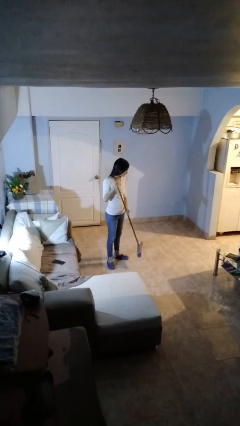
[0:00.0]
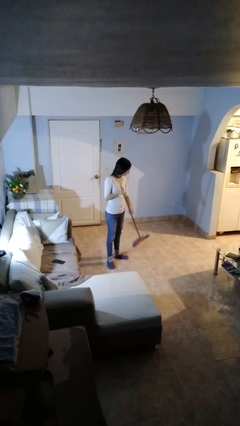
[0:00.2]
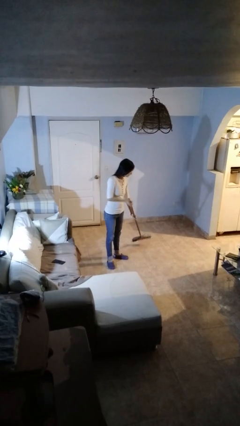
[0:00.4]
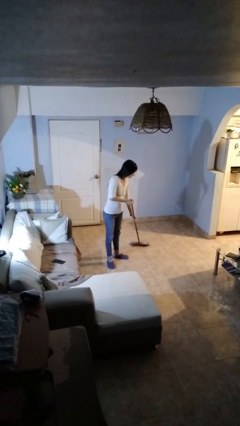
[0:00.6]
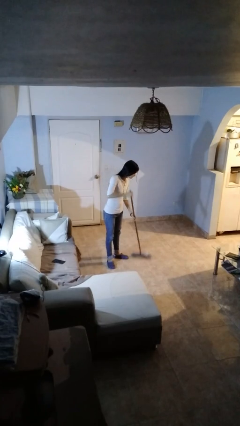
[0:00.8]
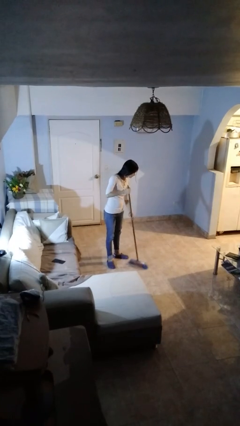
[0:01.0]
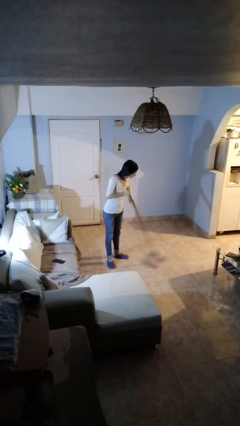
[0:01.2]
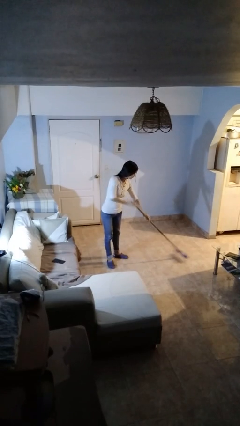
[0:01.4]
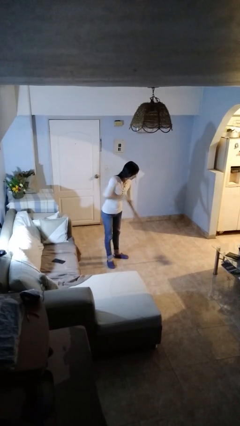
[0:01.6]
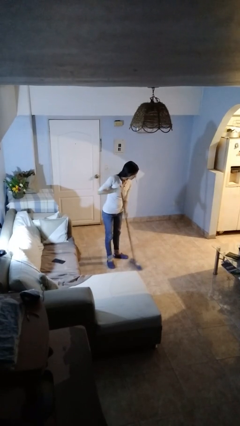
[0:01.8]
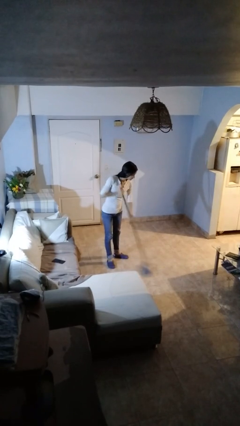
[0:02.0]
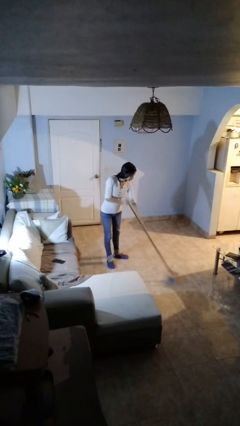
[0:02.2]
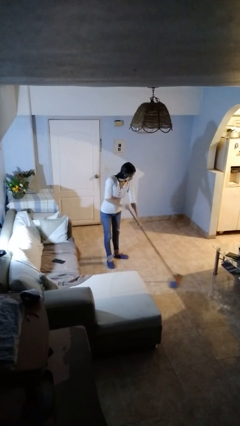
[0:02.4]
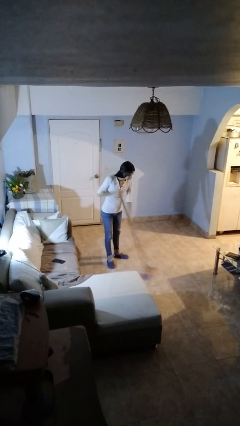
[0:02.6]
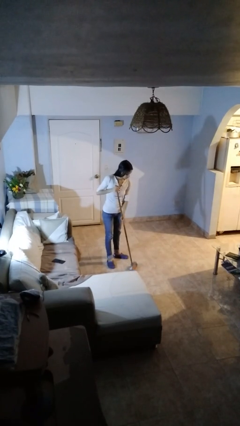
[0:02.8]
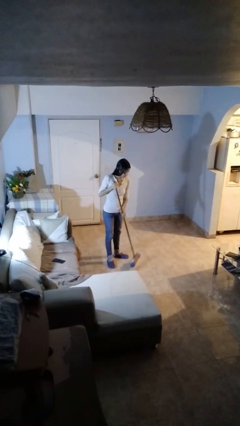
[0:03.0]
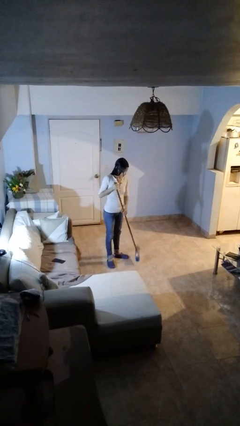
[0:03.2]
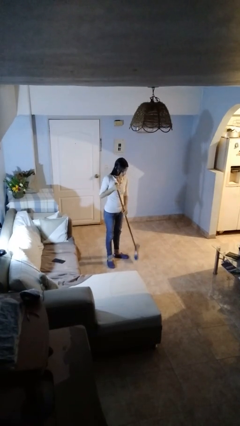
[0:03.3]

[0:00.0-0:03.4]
person sweeps floor

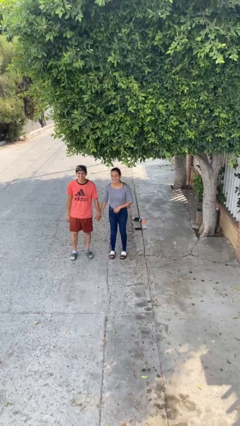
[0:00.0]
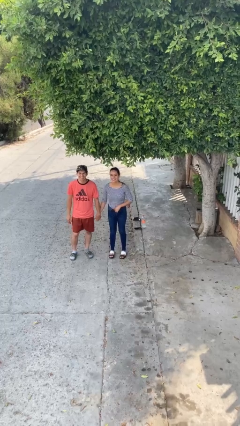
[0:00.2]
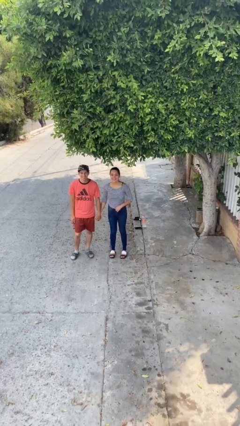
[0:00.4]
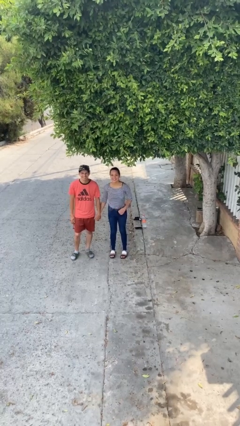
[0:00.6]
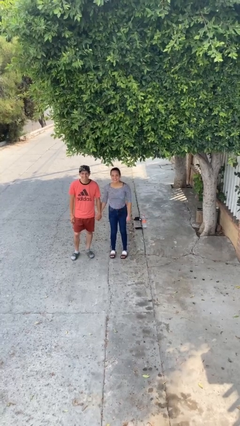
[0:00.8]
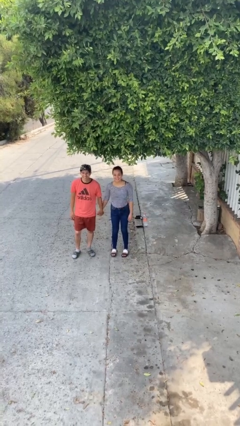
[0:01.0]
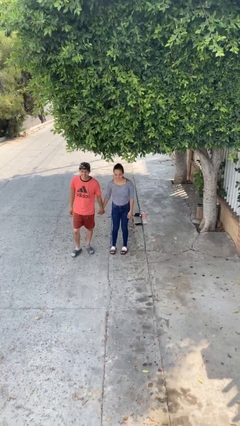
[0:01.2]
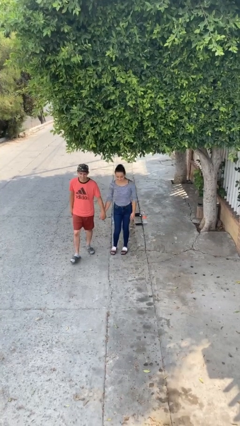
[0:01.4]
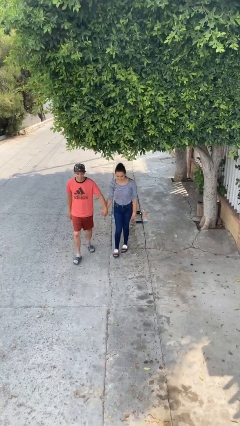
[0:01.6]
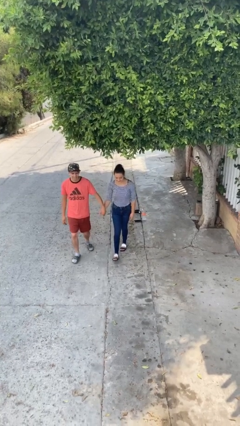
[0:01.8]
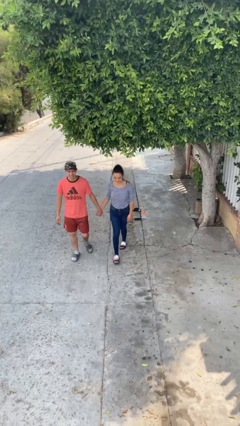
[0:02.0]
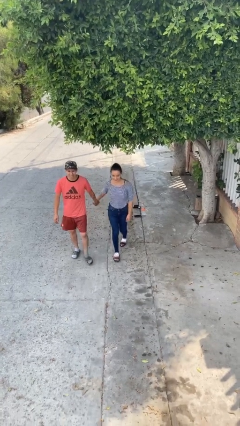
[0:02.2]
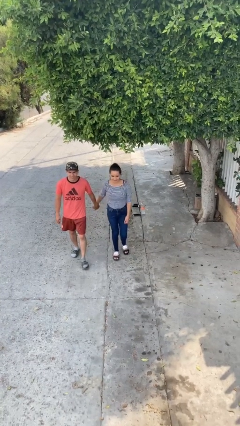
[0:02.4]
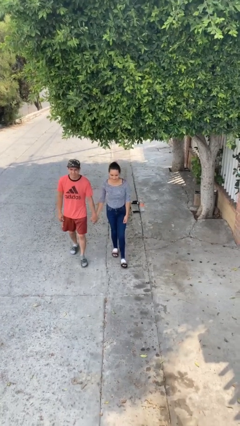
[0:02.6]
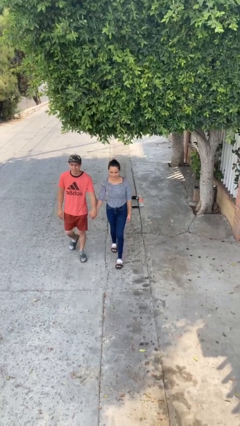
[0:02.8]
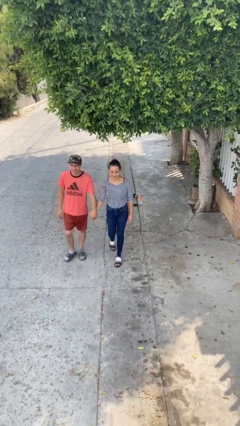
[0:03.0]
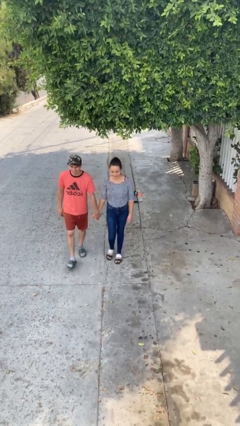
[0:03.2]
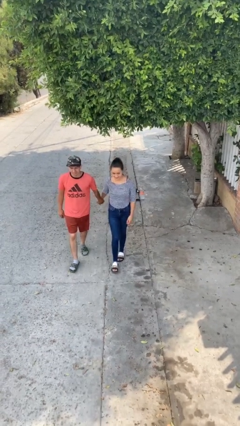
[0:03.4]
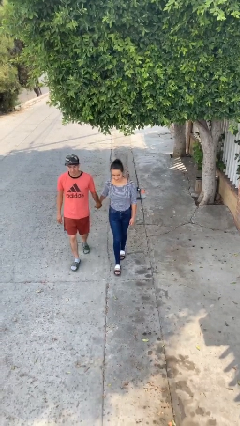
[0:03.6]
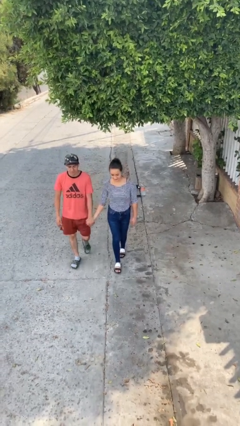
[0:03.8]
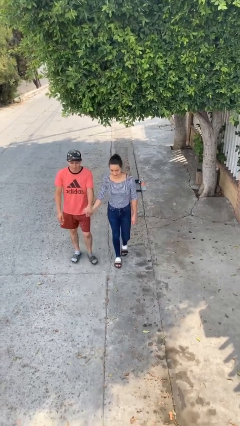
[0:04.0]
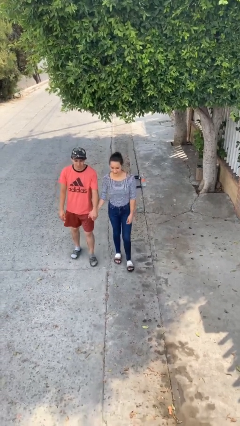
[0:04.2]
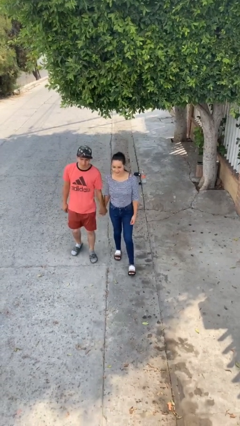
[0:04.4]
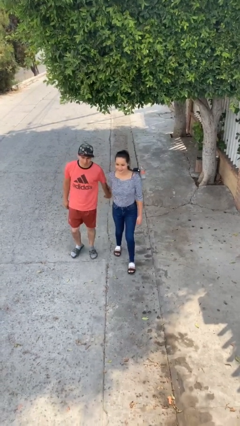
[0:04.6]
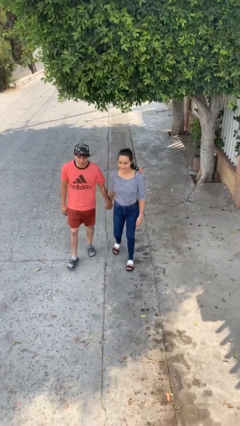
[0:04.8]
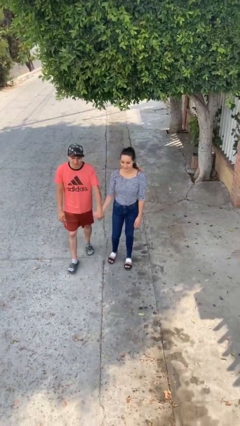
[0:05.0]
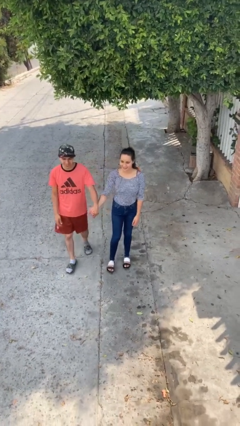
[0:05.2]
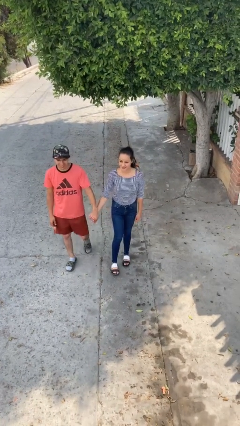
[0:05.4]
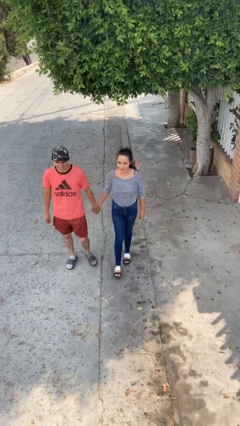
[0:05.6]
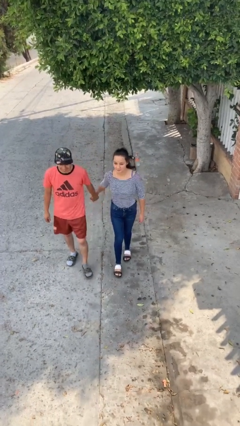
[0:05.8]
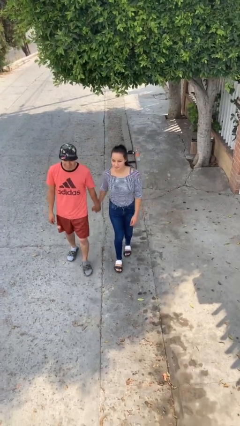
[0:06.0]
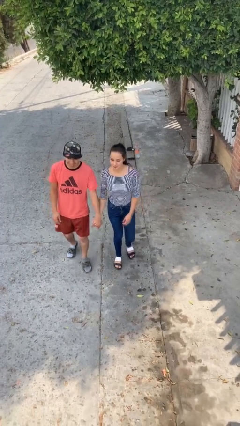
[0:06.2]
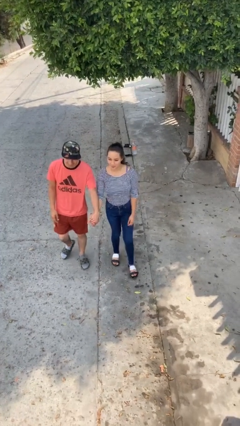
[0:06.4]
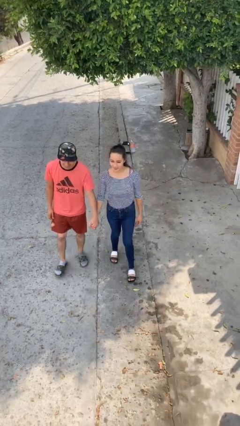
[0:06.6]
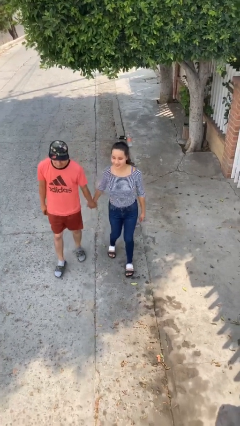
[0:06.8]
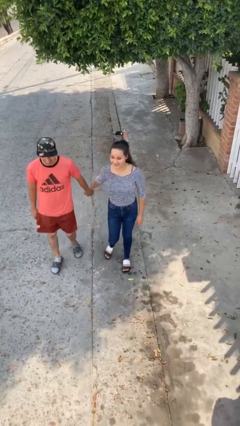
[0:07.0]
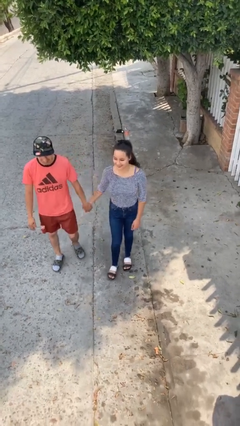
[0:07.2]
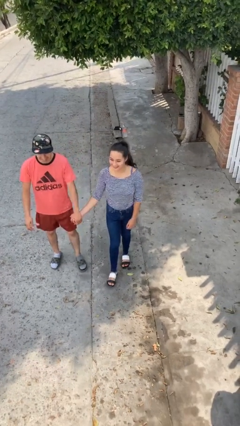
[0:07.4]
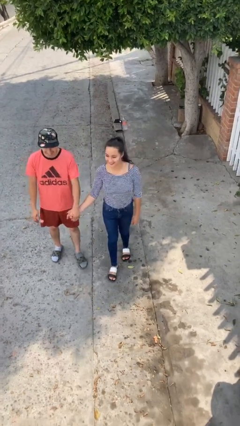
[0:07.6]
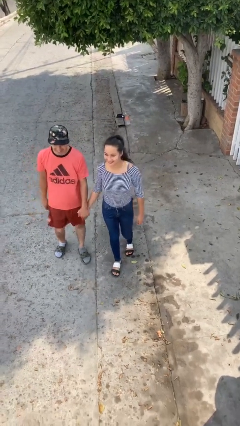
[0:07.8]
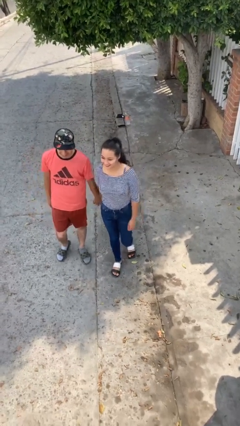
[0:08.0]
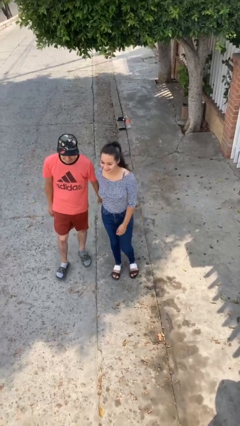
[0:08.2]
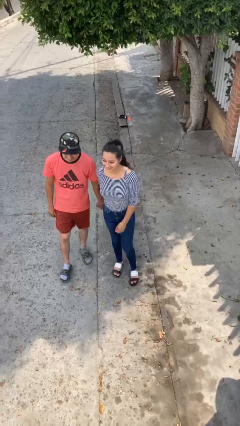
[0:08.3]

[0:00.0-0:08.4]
person holds hand

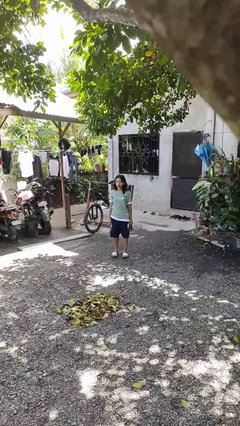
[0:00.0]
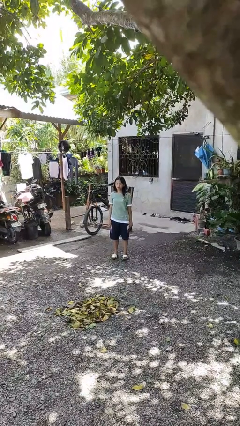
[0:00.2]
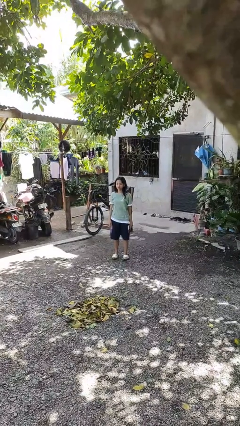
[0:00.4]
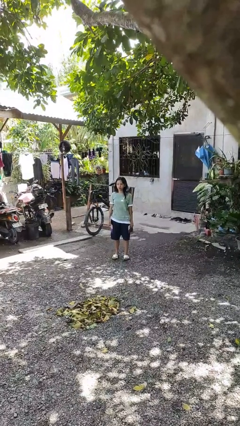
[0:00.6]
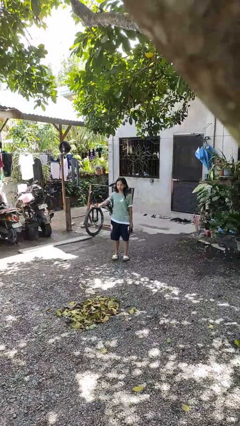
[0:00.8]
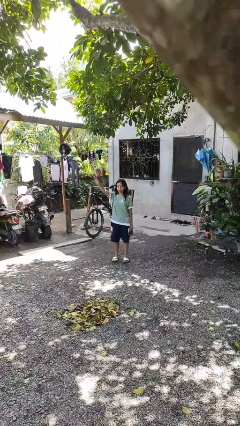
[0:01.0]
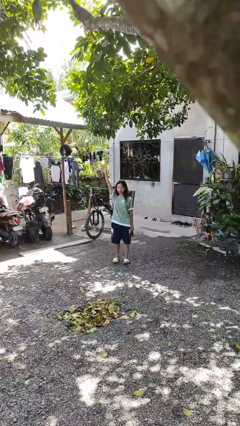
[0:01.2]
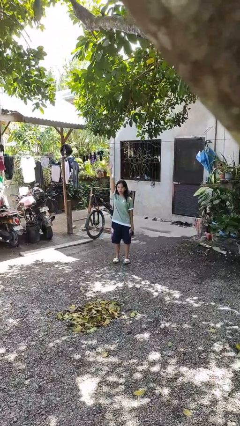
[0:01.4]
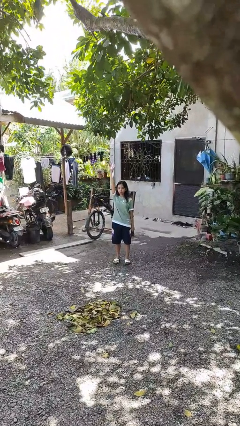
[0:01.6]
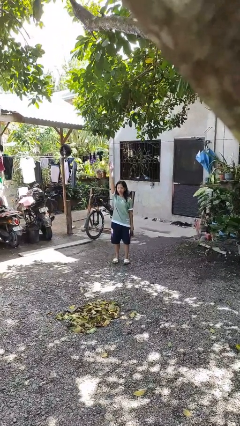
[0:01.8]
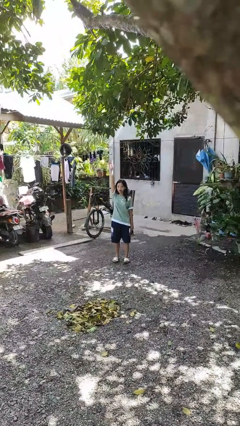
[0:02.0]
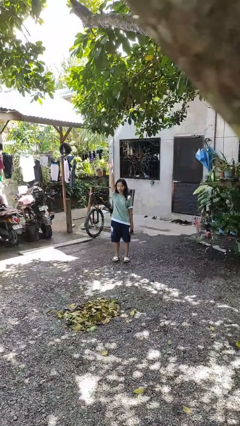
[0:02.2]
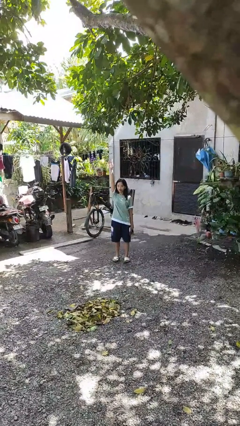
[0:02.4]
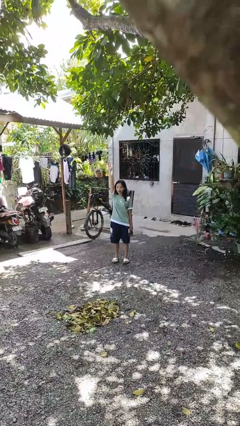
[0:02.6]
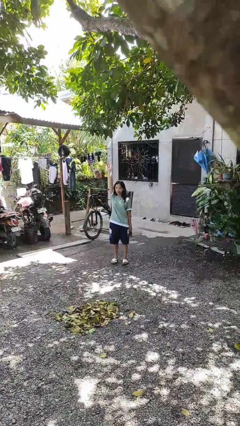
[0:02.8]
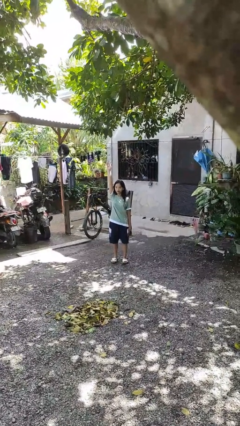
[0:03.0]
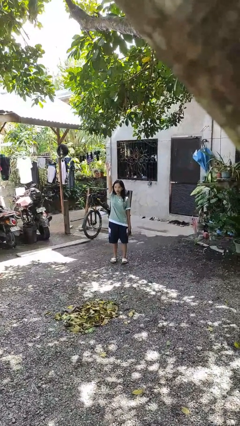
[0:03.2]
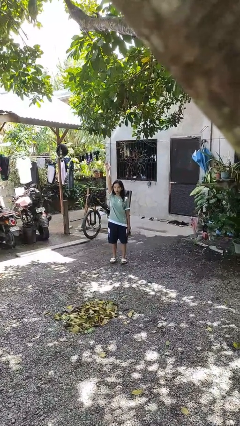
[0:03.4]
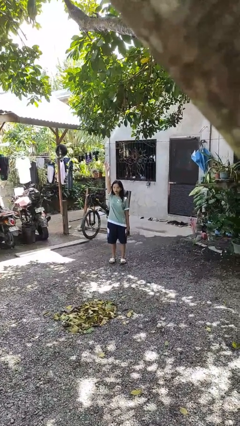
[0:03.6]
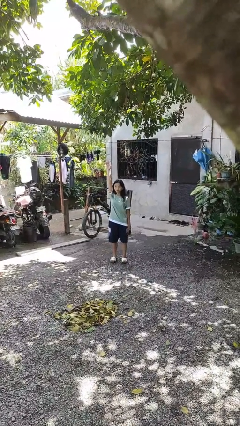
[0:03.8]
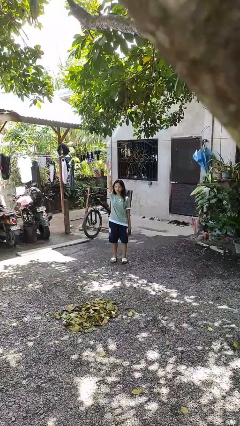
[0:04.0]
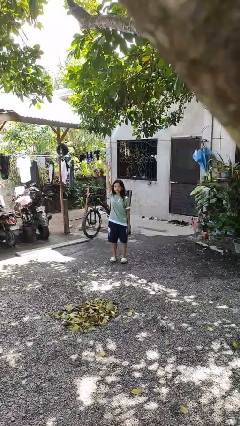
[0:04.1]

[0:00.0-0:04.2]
person gestures raise hand

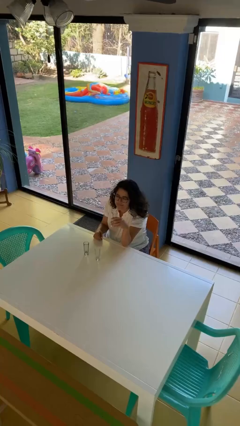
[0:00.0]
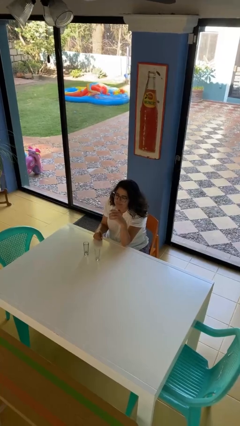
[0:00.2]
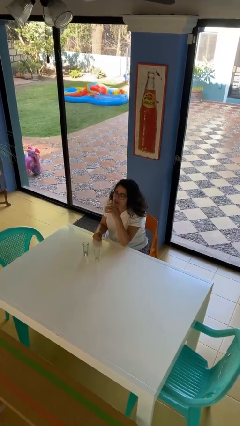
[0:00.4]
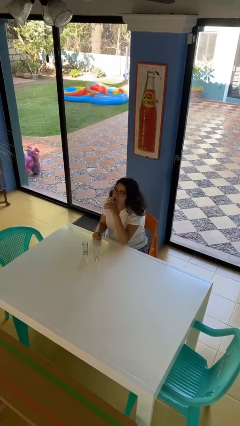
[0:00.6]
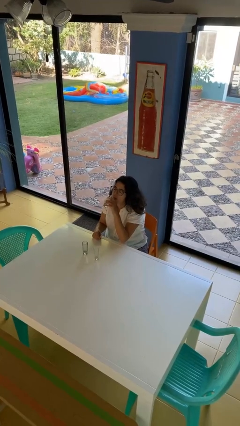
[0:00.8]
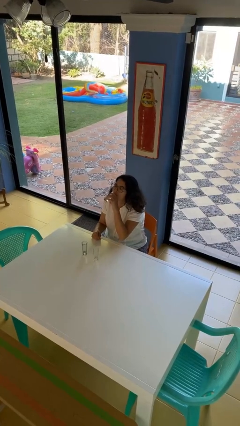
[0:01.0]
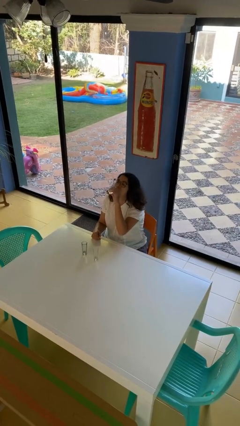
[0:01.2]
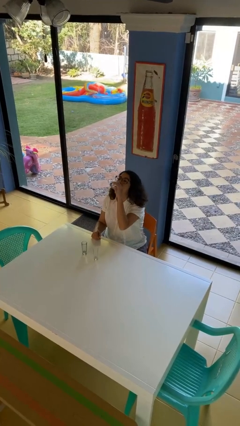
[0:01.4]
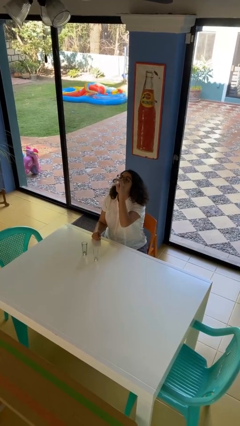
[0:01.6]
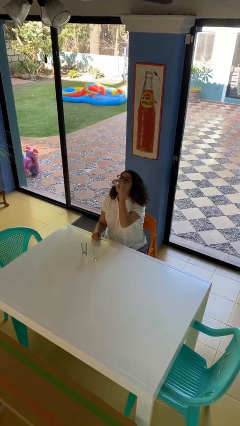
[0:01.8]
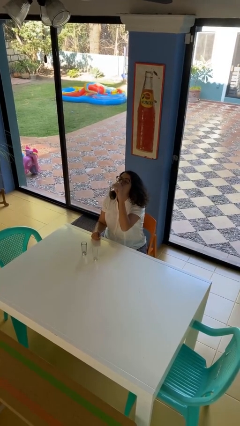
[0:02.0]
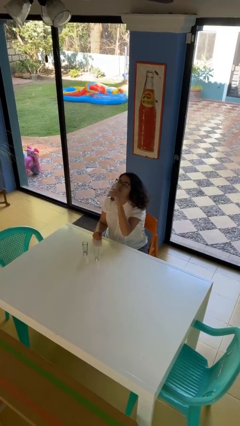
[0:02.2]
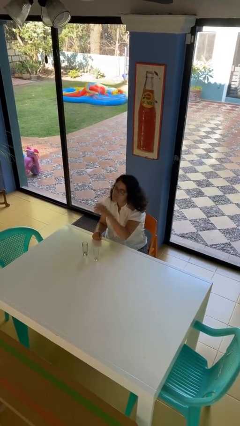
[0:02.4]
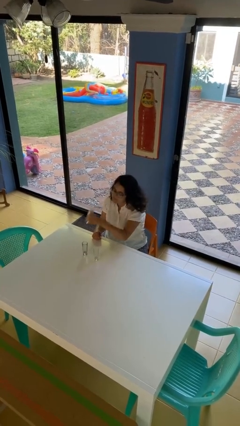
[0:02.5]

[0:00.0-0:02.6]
person drinks from shotglass
